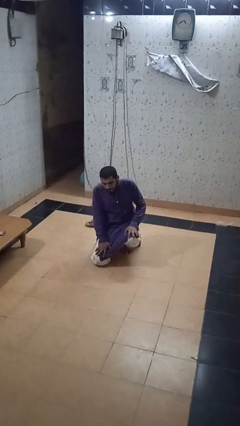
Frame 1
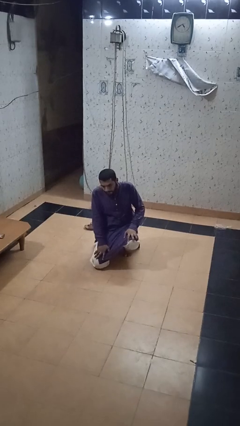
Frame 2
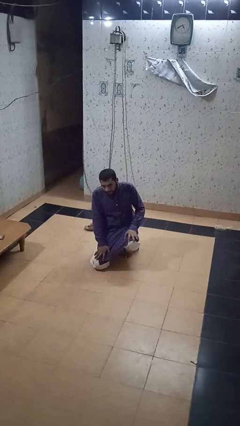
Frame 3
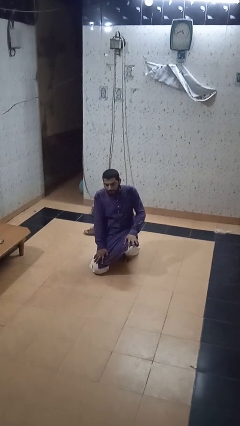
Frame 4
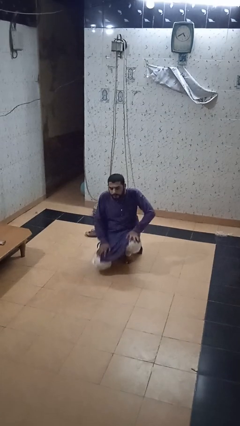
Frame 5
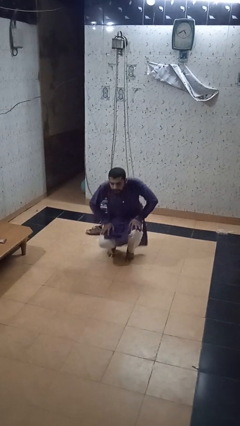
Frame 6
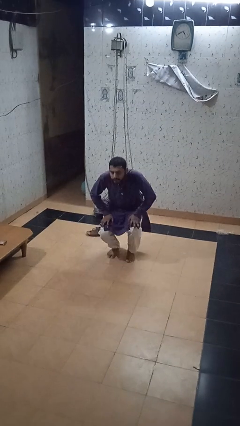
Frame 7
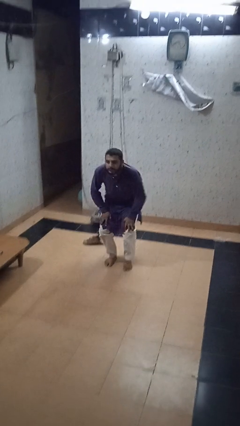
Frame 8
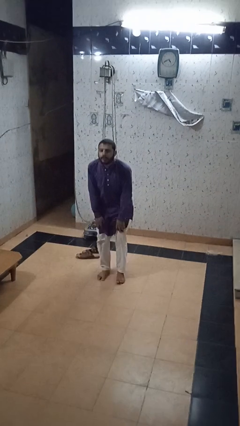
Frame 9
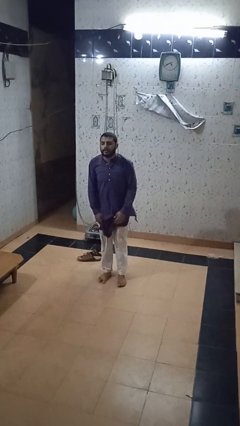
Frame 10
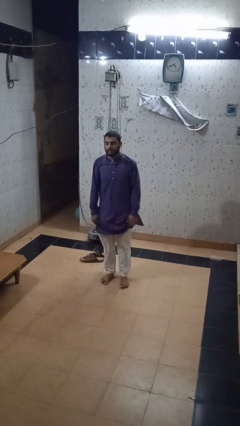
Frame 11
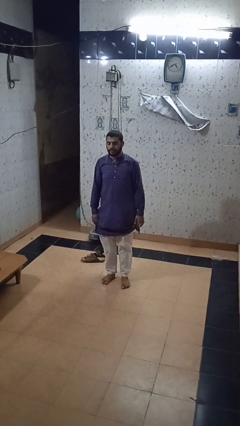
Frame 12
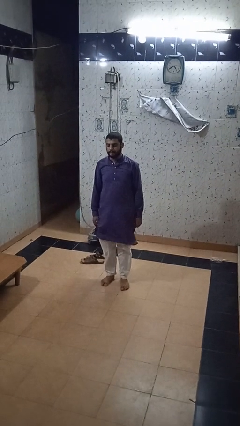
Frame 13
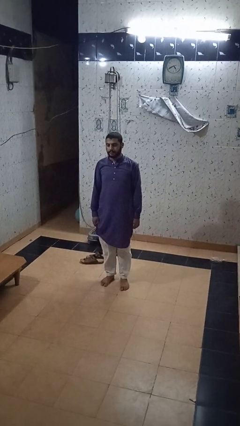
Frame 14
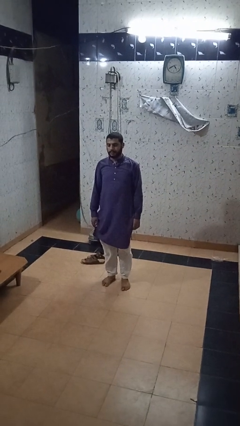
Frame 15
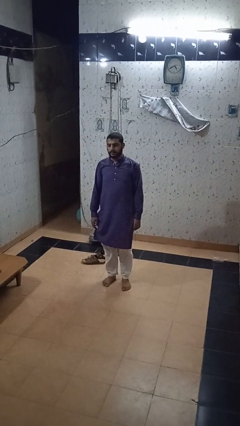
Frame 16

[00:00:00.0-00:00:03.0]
person stands up from floor

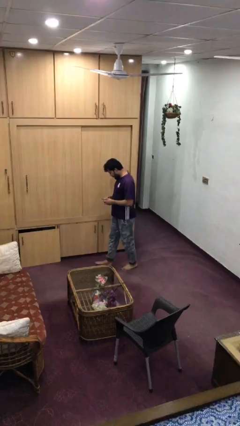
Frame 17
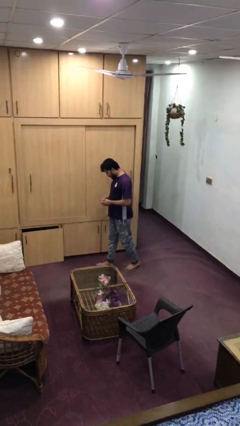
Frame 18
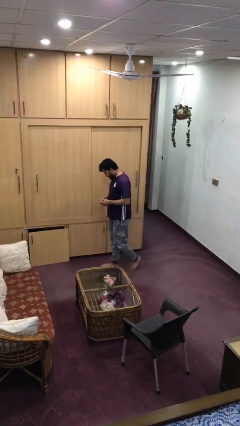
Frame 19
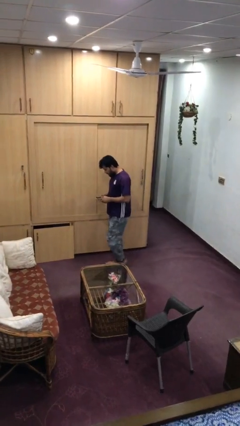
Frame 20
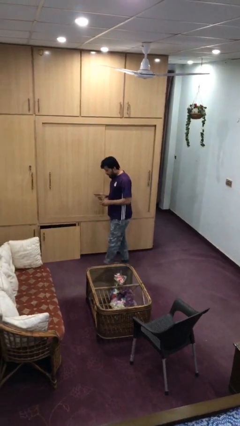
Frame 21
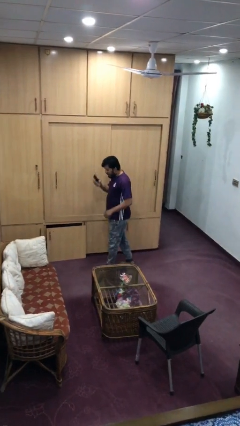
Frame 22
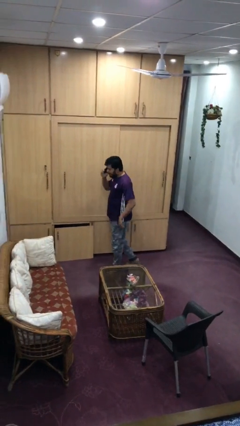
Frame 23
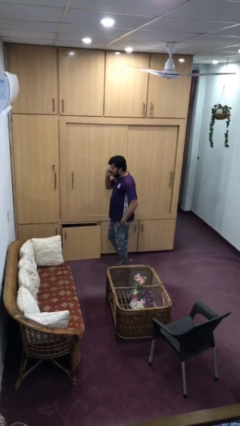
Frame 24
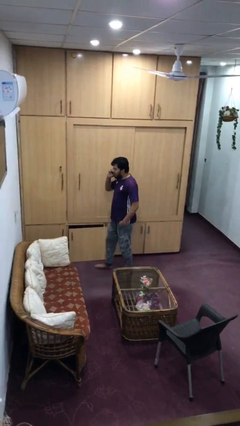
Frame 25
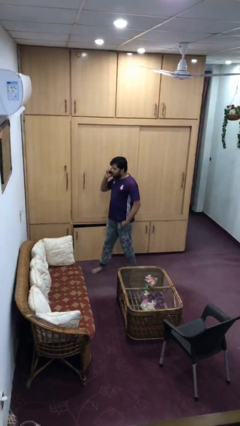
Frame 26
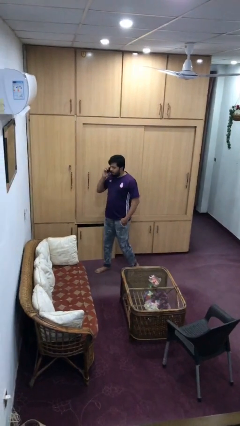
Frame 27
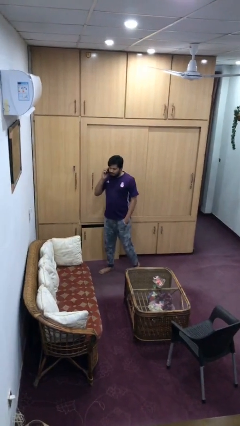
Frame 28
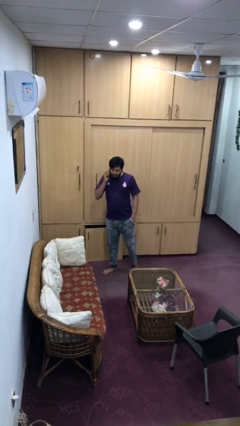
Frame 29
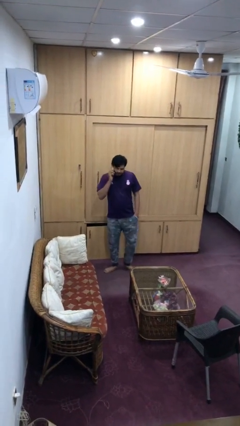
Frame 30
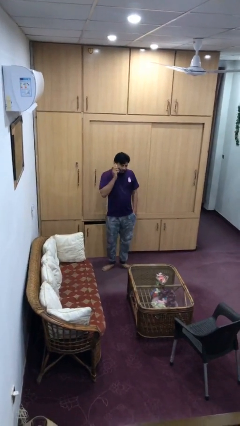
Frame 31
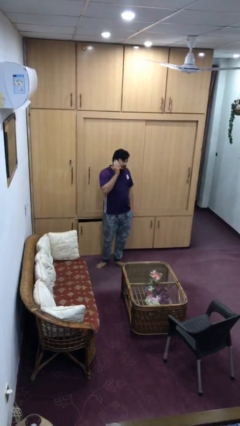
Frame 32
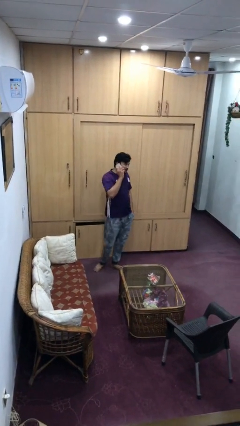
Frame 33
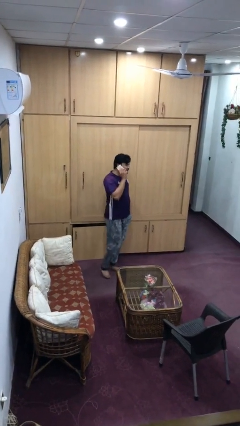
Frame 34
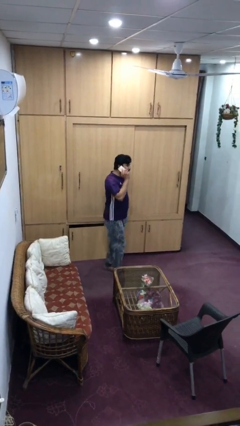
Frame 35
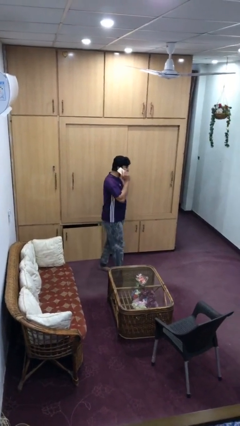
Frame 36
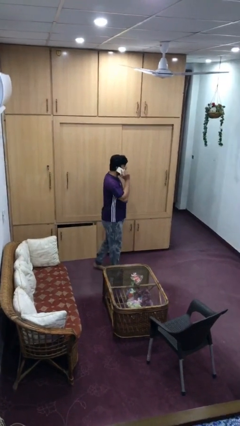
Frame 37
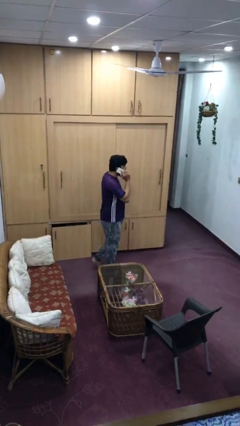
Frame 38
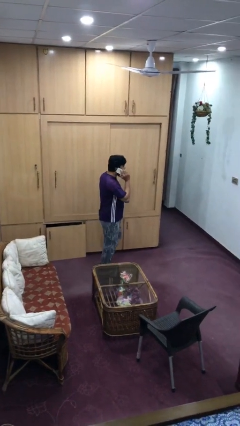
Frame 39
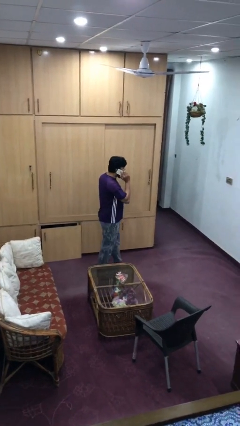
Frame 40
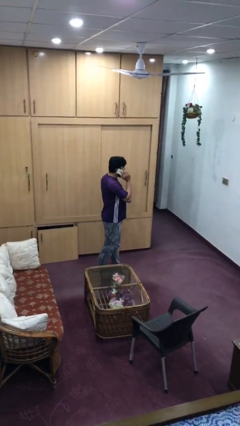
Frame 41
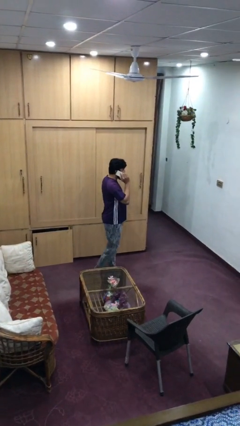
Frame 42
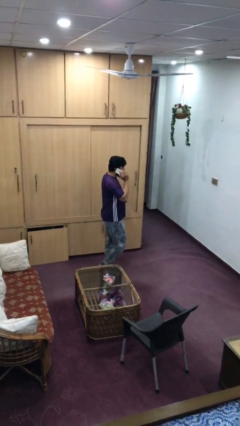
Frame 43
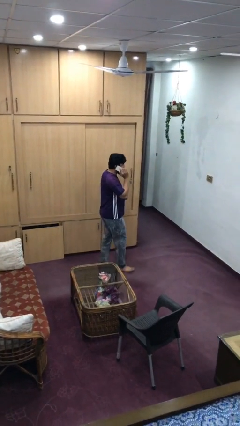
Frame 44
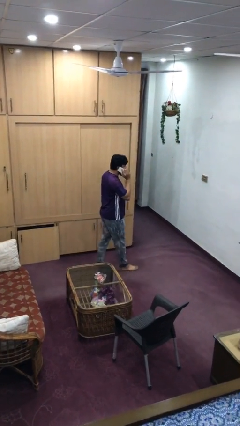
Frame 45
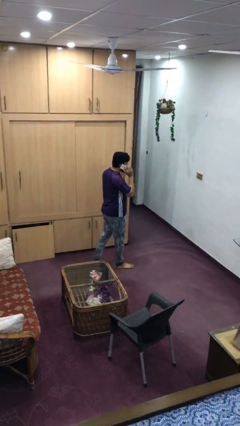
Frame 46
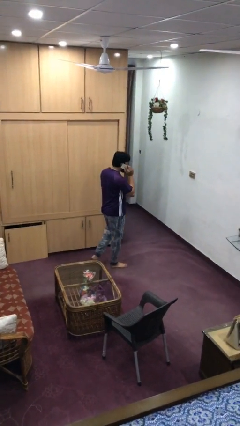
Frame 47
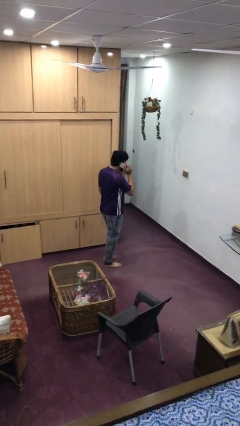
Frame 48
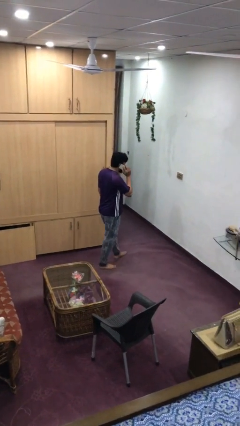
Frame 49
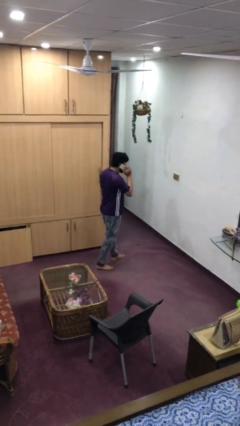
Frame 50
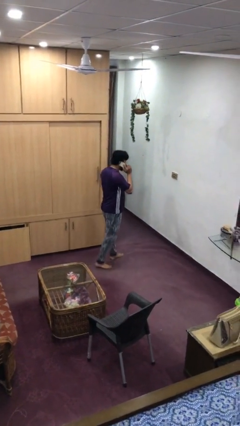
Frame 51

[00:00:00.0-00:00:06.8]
person talks on phone

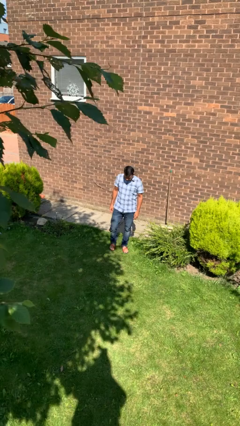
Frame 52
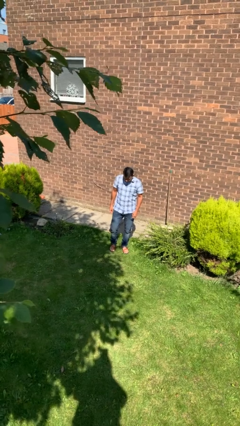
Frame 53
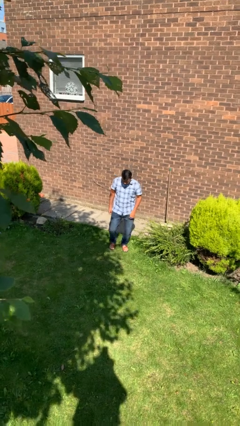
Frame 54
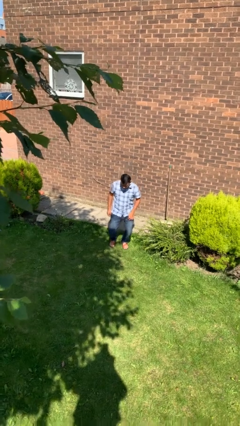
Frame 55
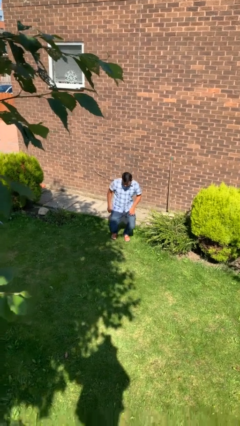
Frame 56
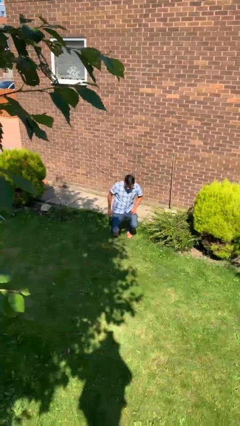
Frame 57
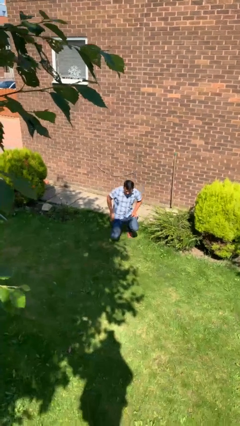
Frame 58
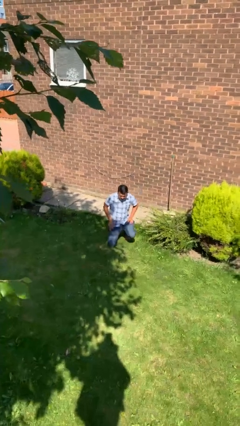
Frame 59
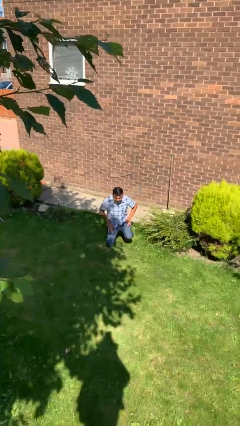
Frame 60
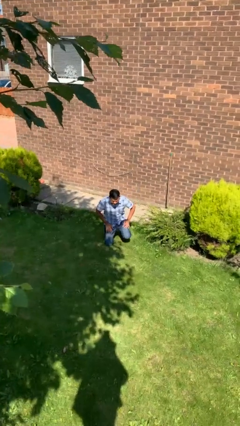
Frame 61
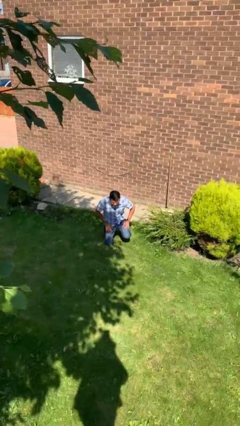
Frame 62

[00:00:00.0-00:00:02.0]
person kneels

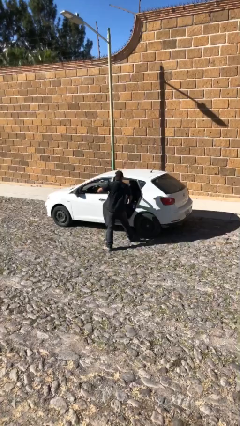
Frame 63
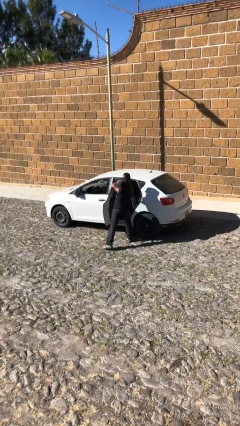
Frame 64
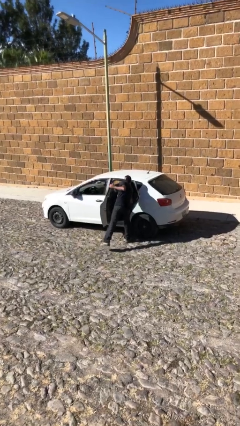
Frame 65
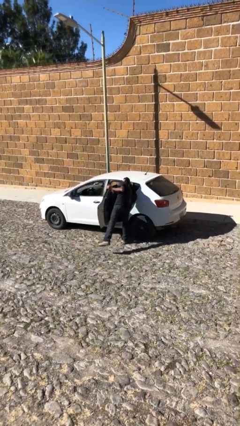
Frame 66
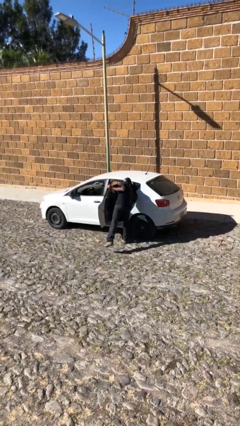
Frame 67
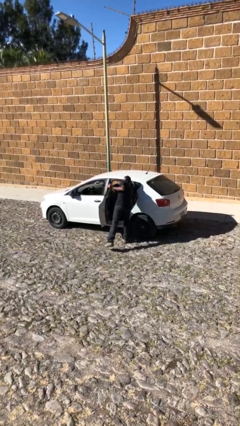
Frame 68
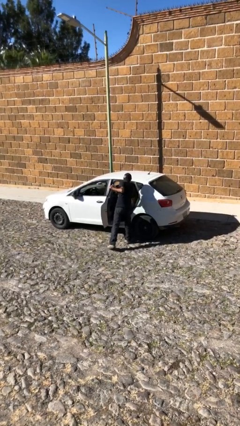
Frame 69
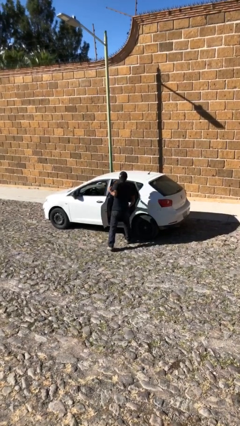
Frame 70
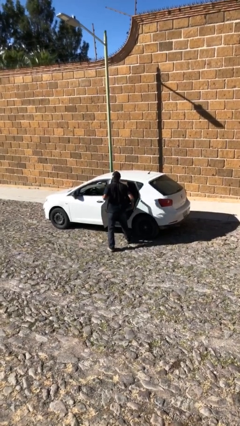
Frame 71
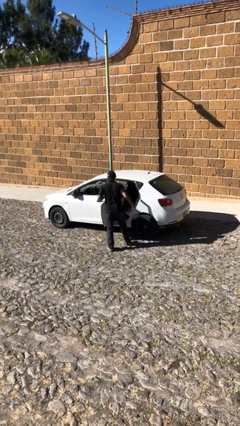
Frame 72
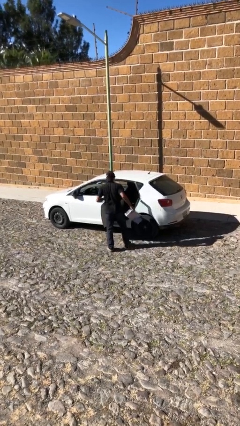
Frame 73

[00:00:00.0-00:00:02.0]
person unloads car

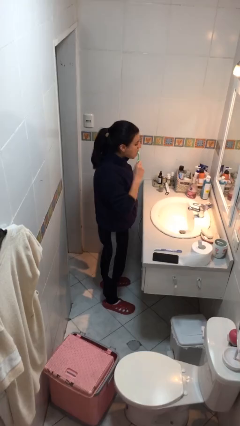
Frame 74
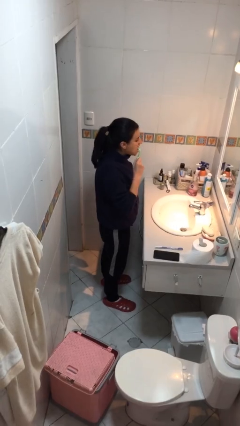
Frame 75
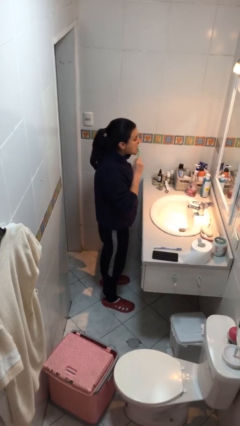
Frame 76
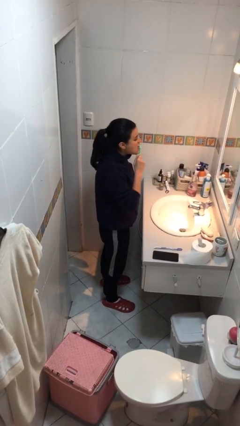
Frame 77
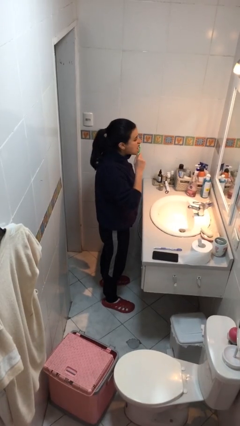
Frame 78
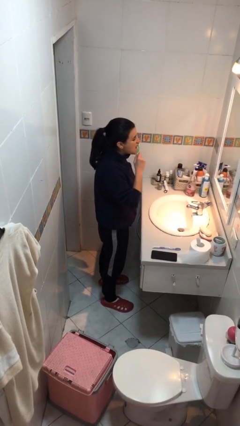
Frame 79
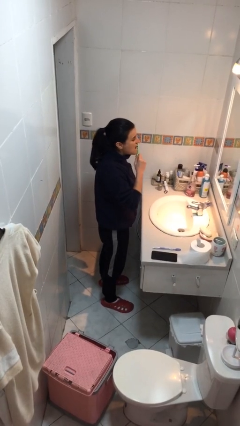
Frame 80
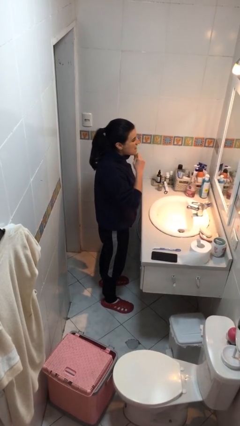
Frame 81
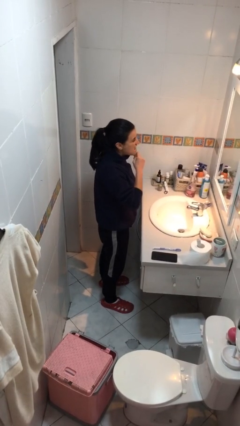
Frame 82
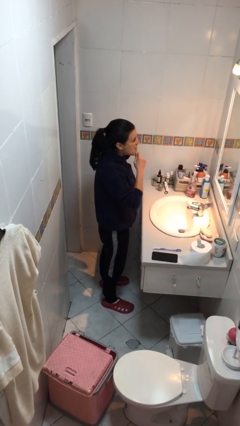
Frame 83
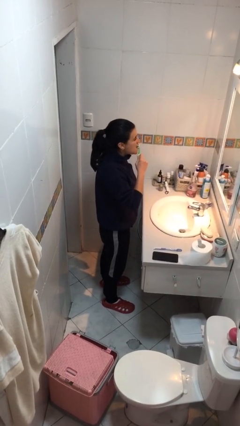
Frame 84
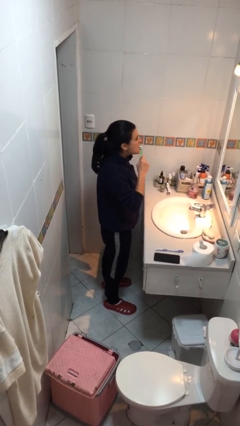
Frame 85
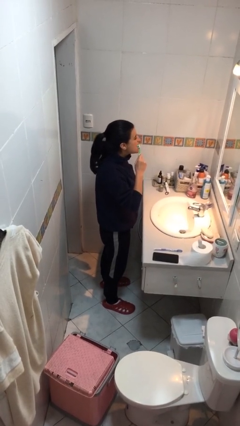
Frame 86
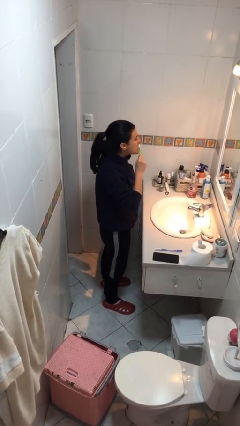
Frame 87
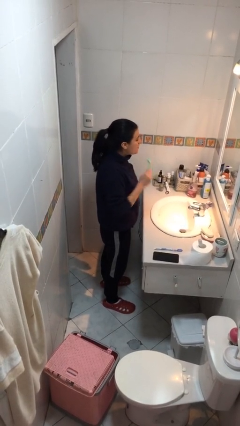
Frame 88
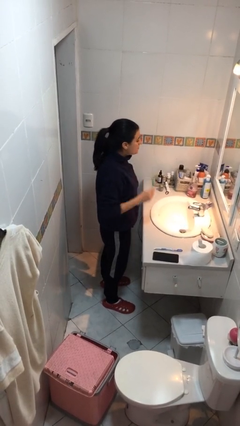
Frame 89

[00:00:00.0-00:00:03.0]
person brushes teeth

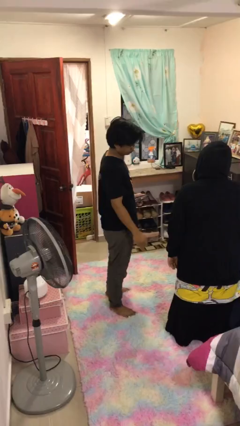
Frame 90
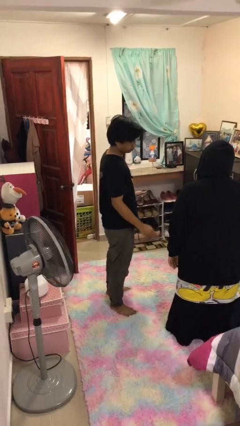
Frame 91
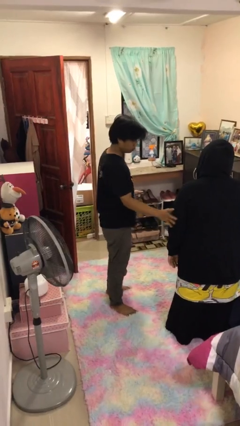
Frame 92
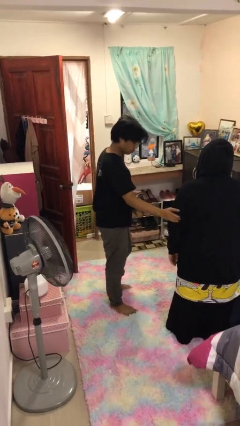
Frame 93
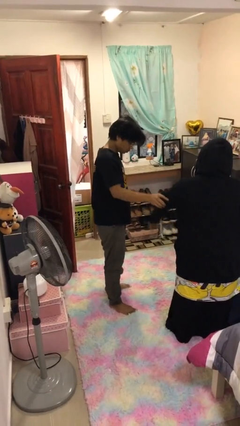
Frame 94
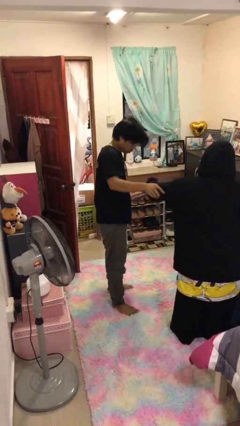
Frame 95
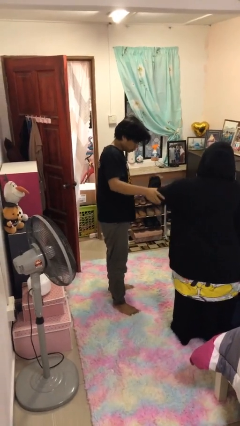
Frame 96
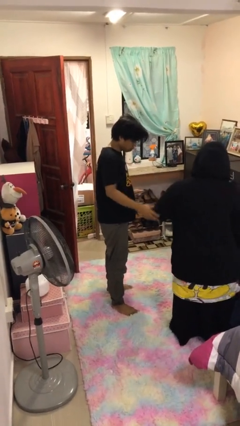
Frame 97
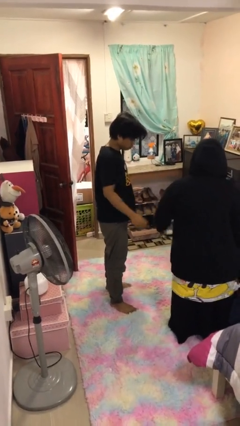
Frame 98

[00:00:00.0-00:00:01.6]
person grabs person by bicep
